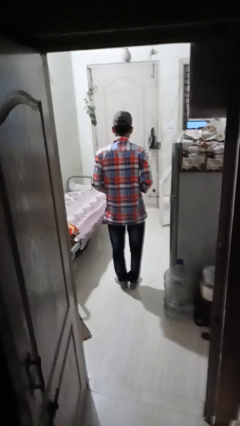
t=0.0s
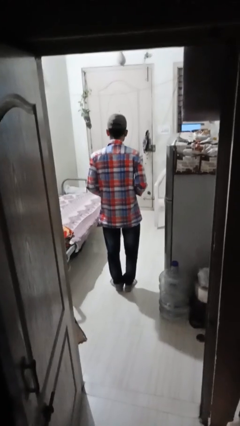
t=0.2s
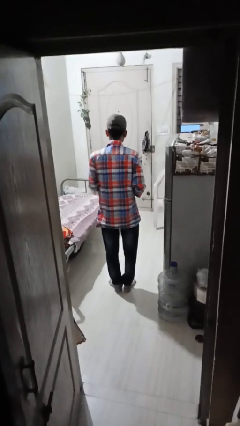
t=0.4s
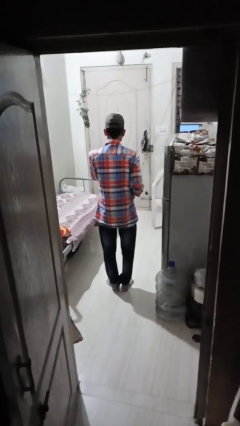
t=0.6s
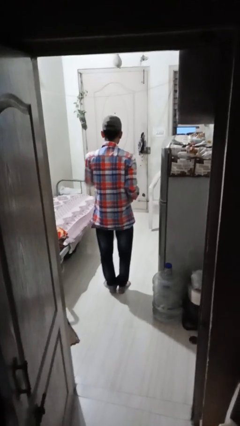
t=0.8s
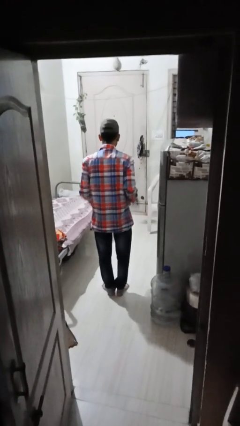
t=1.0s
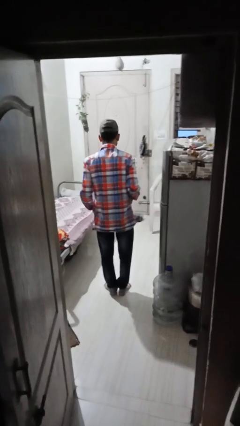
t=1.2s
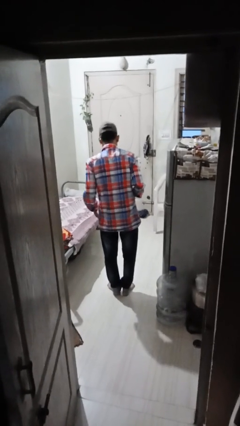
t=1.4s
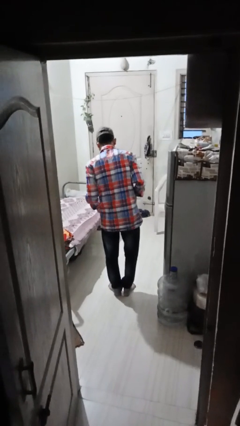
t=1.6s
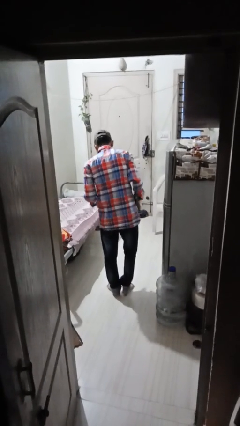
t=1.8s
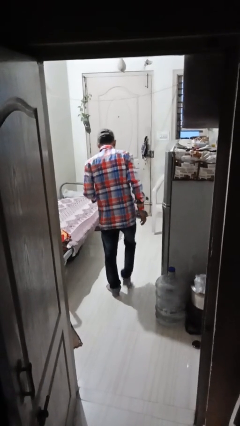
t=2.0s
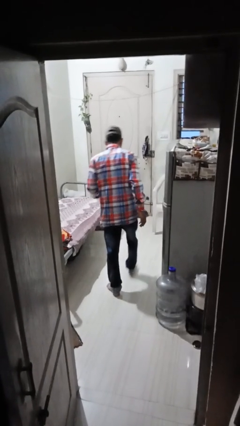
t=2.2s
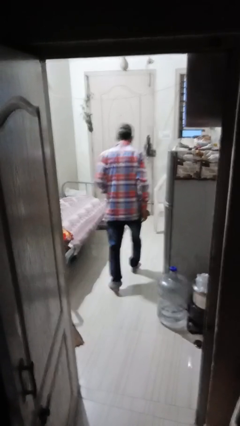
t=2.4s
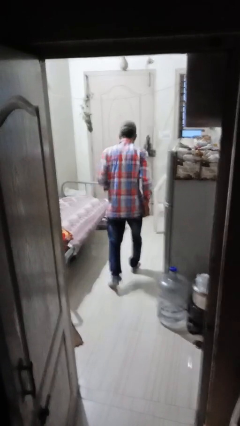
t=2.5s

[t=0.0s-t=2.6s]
person throws object to ground

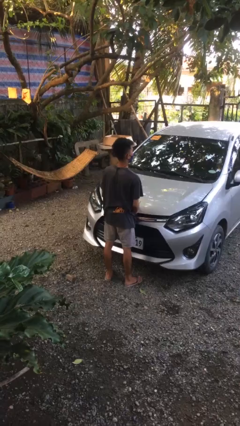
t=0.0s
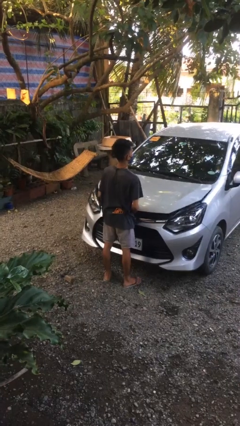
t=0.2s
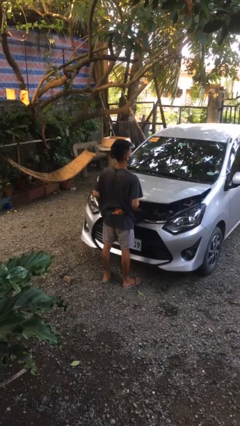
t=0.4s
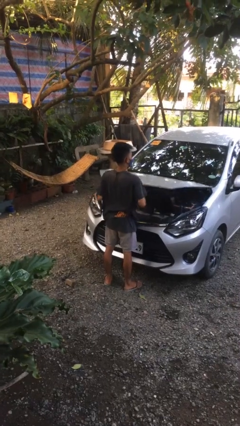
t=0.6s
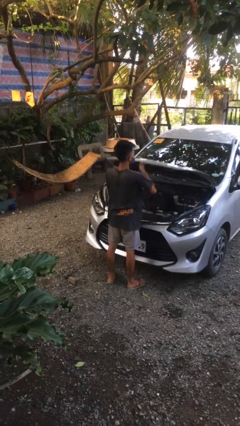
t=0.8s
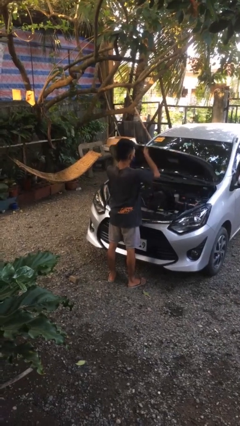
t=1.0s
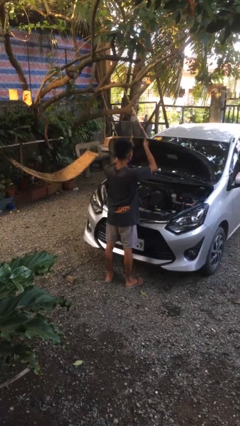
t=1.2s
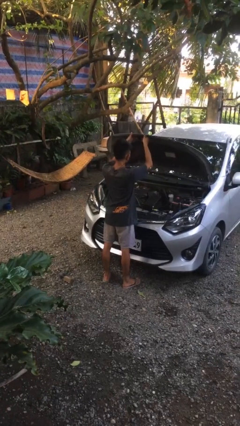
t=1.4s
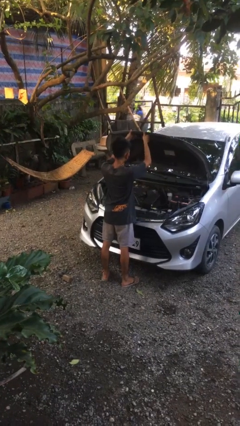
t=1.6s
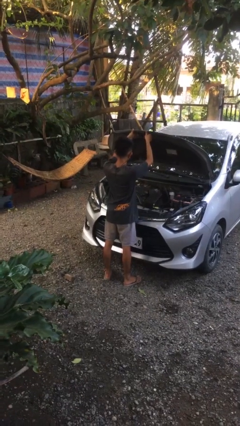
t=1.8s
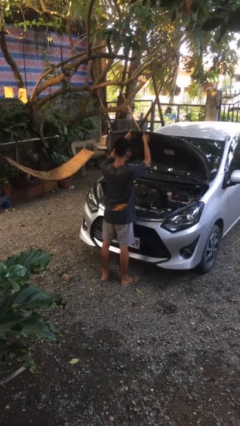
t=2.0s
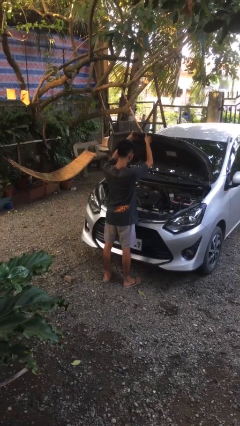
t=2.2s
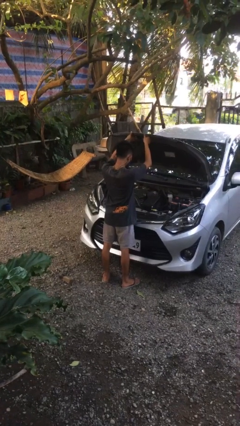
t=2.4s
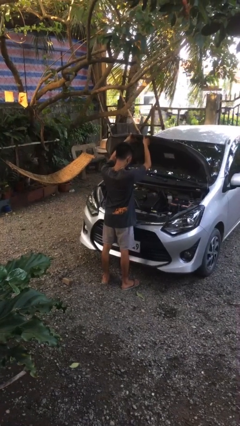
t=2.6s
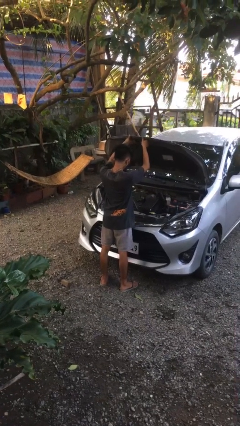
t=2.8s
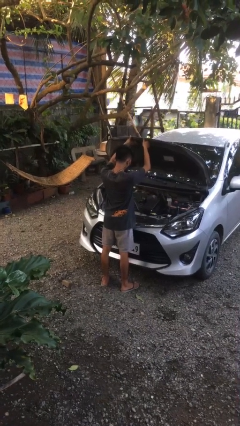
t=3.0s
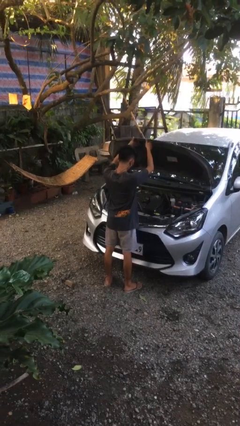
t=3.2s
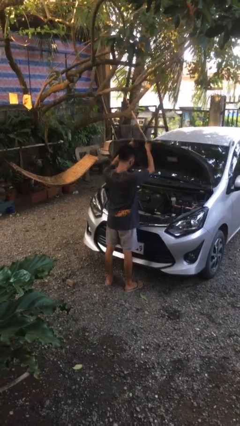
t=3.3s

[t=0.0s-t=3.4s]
person opens car hood

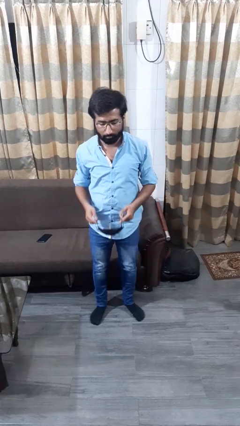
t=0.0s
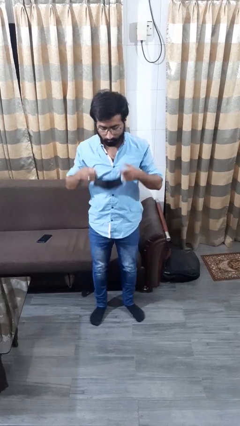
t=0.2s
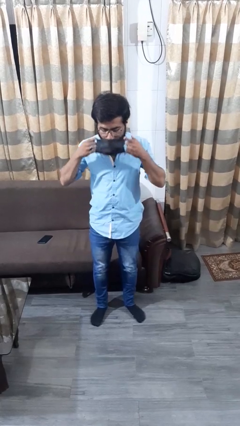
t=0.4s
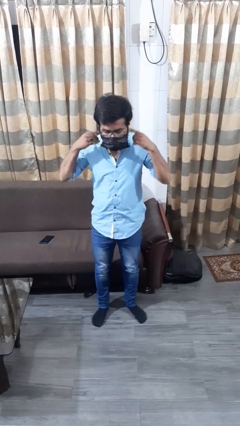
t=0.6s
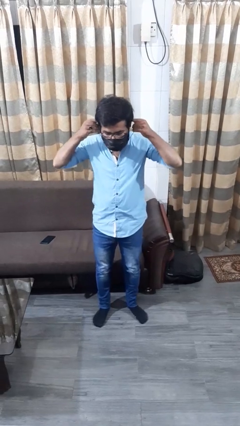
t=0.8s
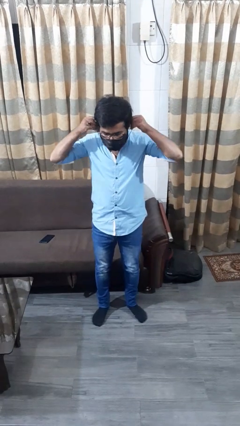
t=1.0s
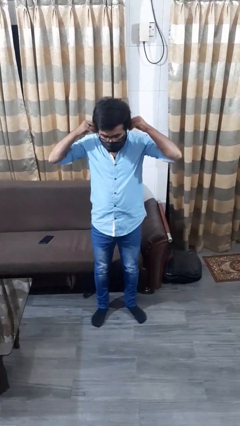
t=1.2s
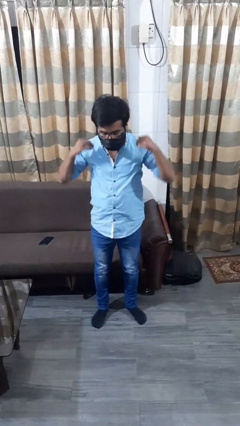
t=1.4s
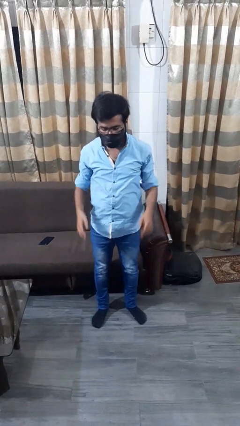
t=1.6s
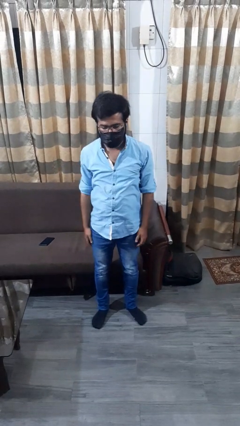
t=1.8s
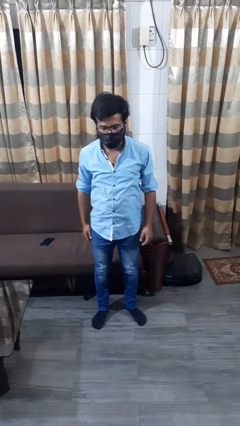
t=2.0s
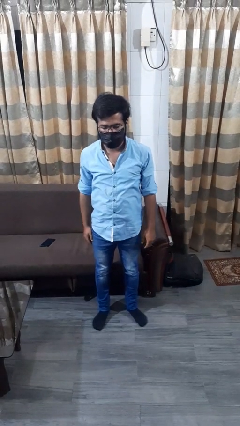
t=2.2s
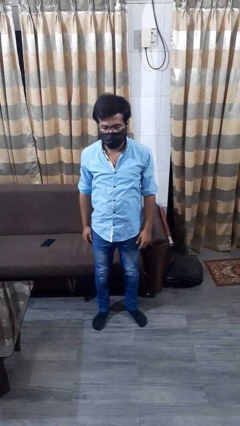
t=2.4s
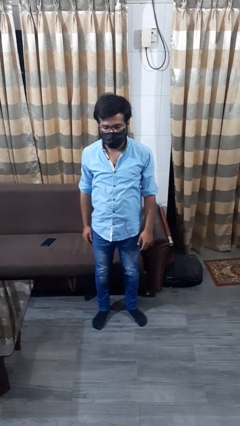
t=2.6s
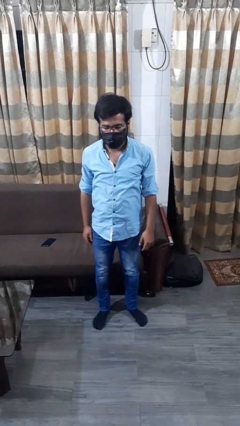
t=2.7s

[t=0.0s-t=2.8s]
person puts on facemask

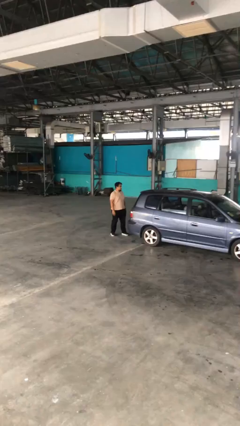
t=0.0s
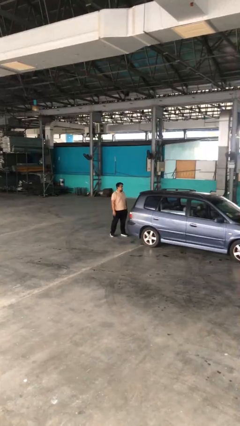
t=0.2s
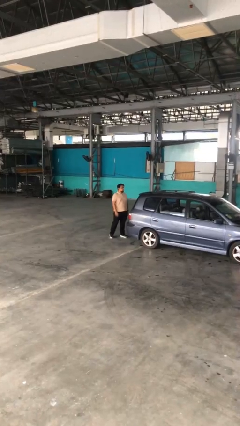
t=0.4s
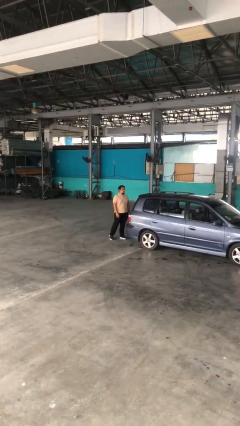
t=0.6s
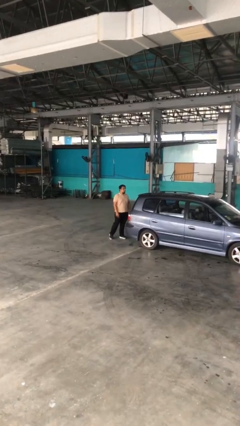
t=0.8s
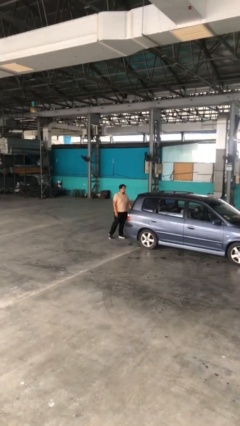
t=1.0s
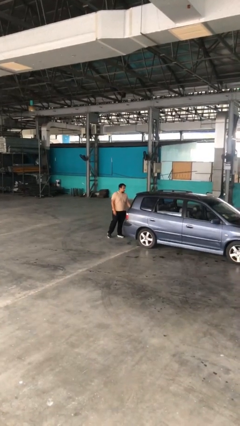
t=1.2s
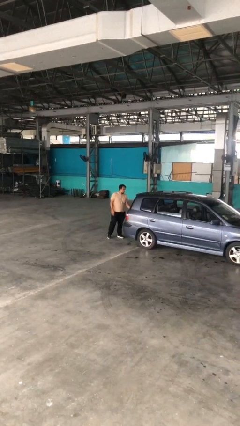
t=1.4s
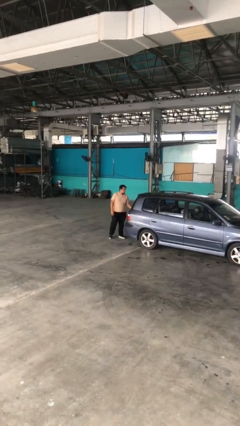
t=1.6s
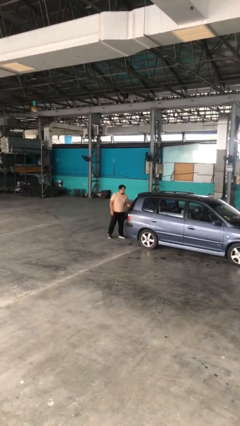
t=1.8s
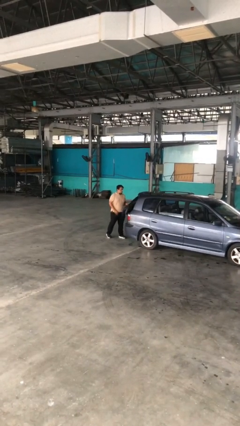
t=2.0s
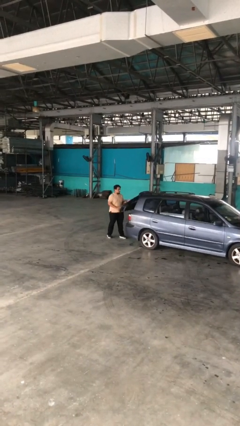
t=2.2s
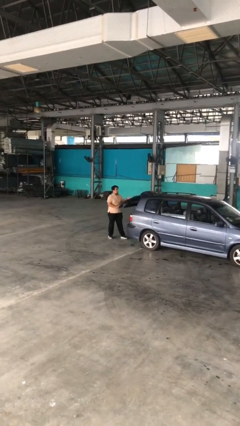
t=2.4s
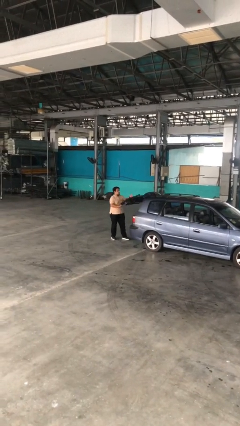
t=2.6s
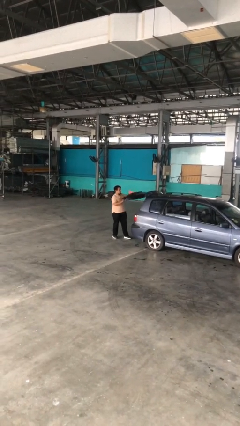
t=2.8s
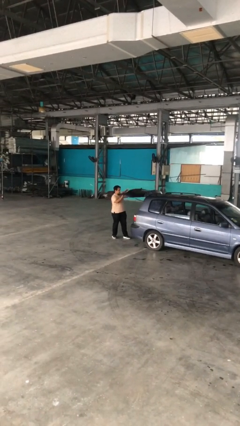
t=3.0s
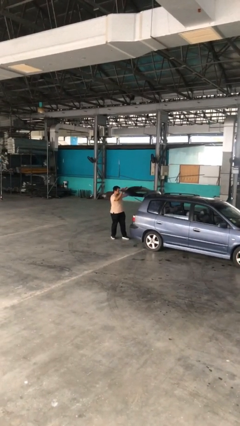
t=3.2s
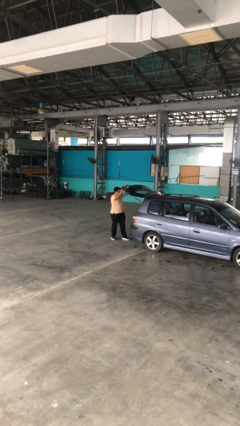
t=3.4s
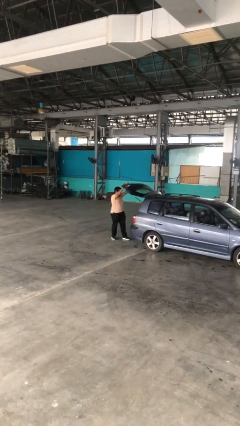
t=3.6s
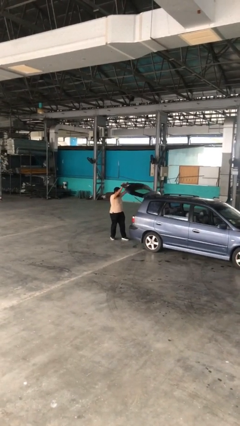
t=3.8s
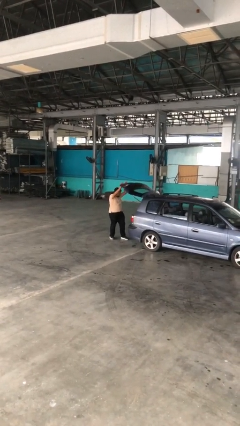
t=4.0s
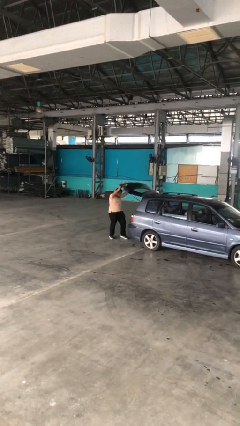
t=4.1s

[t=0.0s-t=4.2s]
person opens car trunk

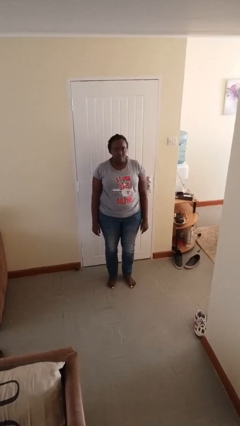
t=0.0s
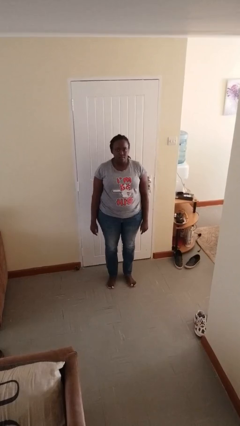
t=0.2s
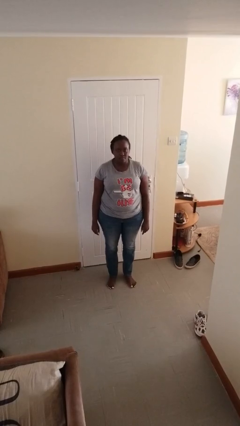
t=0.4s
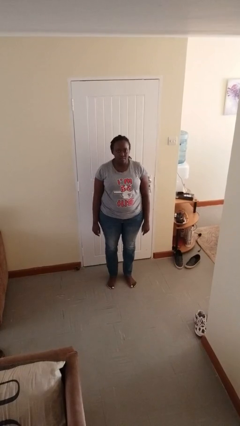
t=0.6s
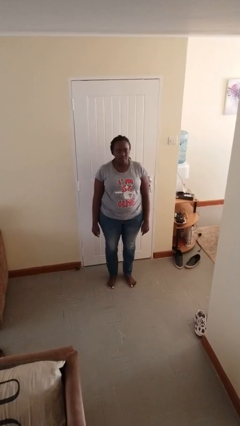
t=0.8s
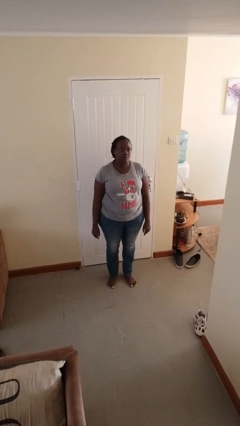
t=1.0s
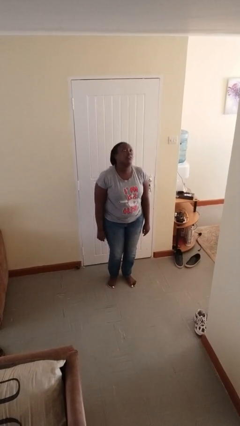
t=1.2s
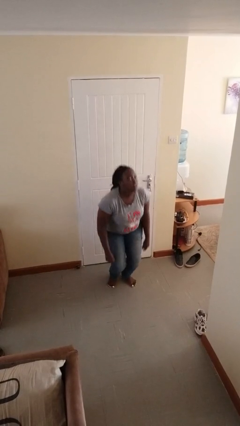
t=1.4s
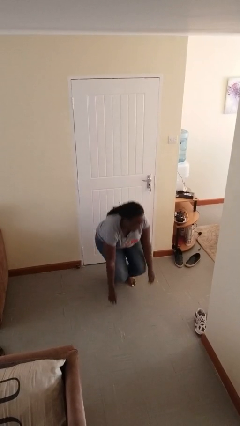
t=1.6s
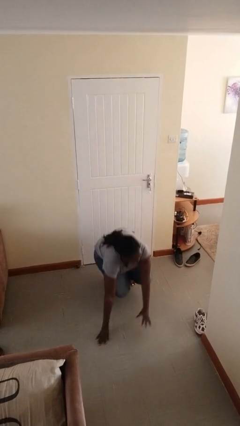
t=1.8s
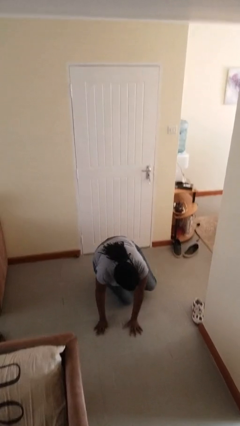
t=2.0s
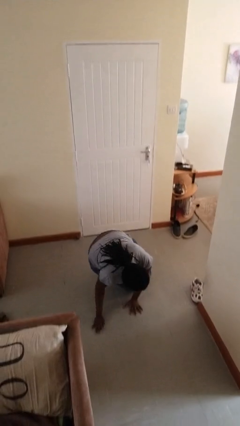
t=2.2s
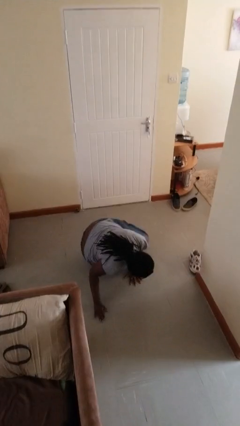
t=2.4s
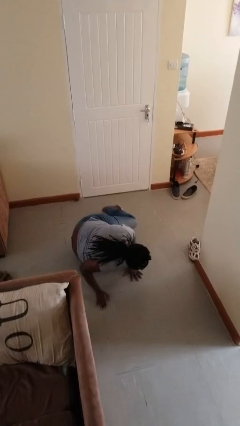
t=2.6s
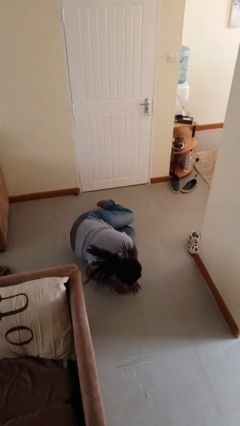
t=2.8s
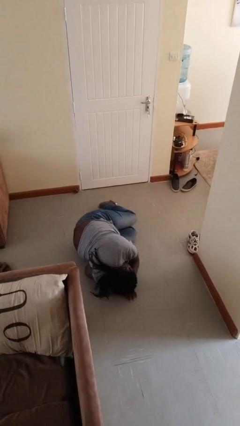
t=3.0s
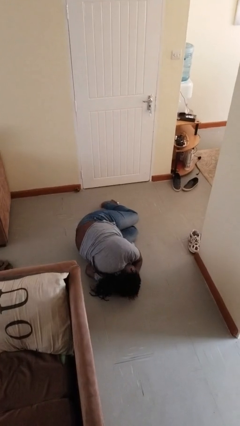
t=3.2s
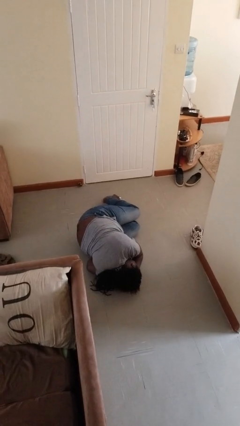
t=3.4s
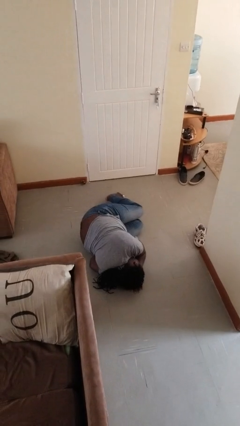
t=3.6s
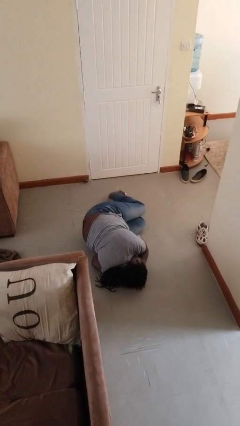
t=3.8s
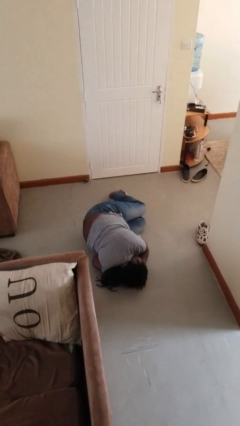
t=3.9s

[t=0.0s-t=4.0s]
person falls while standing

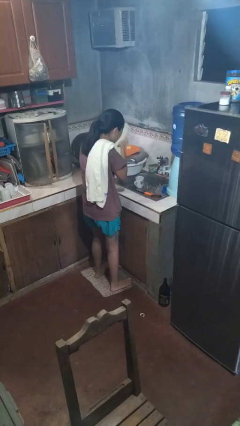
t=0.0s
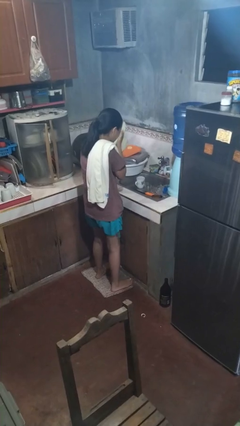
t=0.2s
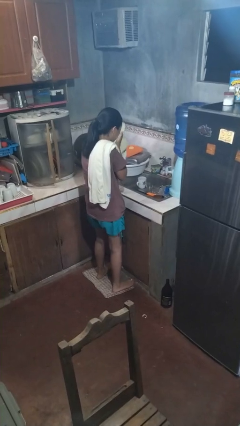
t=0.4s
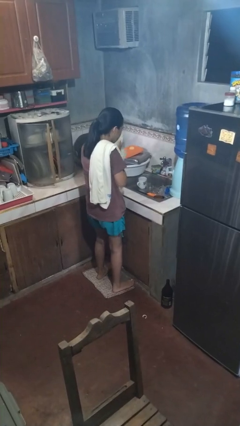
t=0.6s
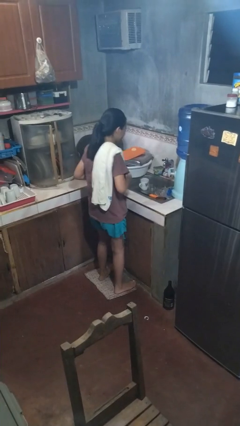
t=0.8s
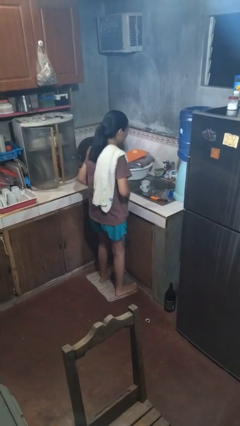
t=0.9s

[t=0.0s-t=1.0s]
person dries face with towel
